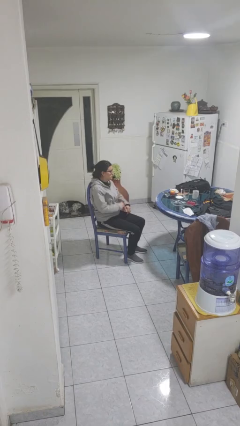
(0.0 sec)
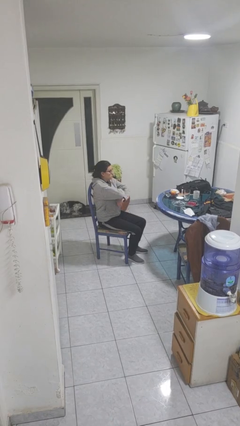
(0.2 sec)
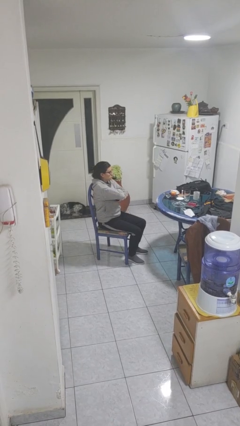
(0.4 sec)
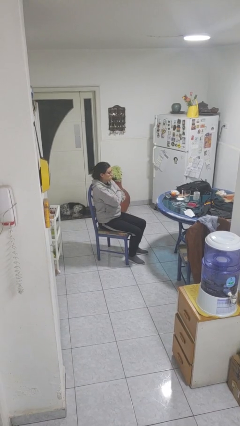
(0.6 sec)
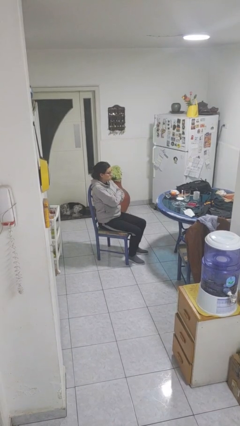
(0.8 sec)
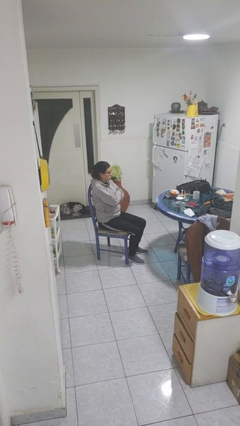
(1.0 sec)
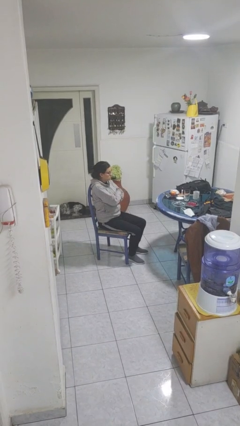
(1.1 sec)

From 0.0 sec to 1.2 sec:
person crosses arms

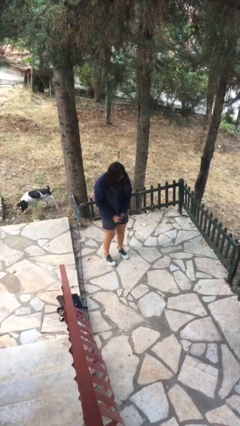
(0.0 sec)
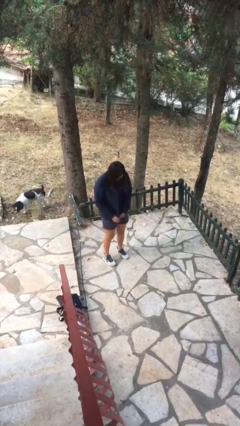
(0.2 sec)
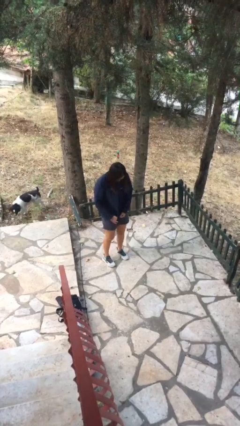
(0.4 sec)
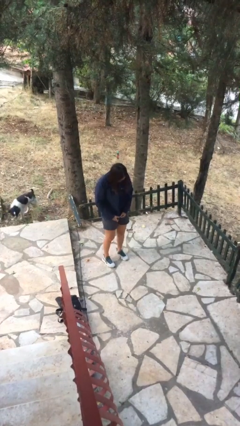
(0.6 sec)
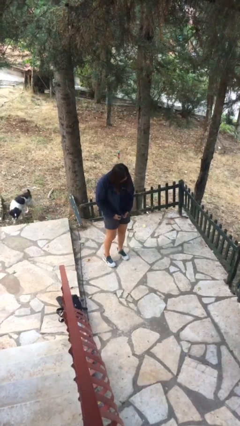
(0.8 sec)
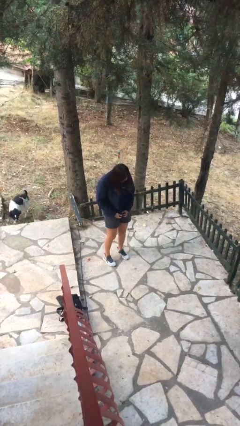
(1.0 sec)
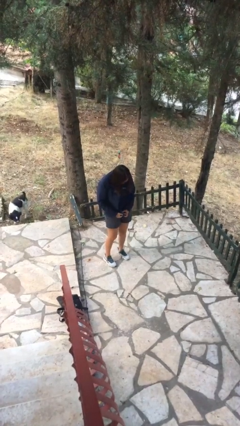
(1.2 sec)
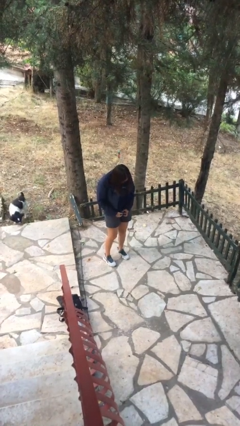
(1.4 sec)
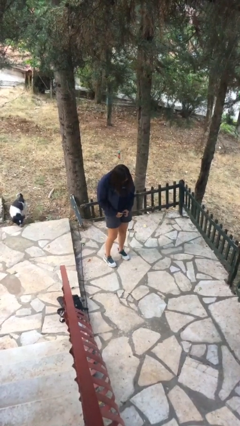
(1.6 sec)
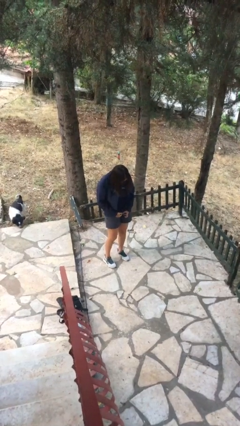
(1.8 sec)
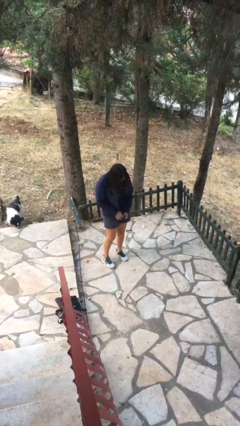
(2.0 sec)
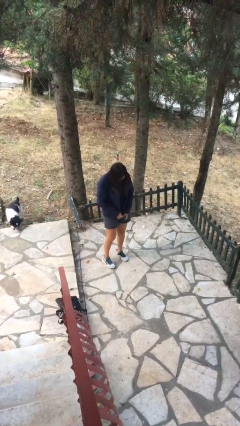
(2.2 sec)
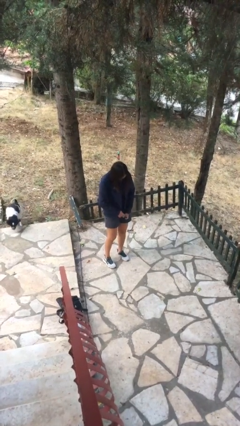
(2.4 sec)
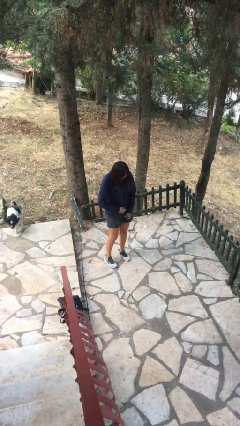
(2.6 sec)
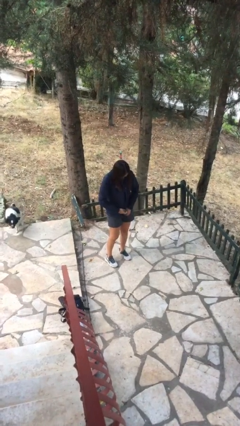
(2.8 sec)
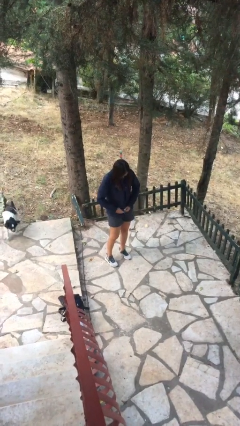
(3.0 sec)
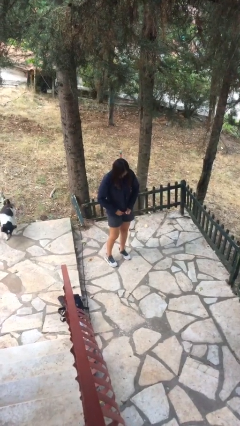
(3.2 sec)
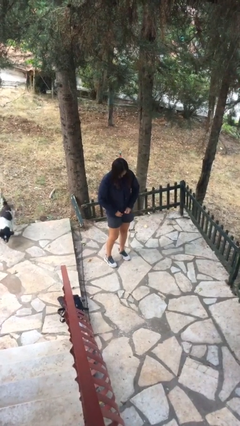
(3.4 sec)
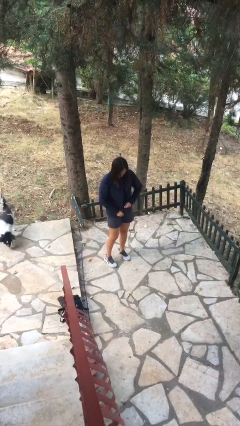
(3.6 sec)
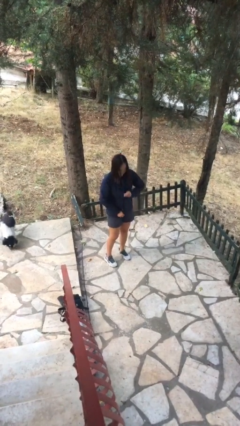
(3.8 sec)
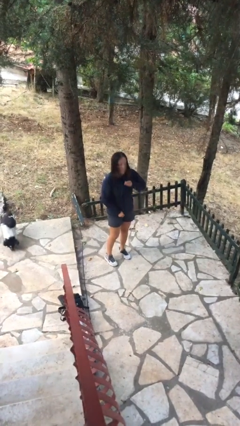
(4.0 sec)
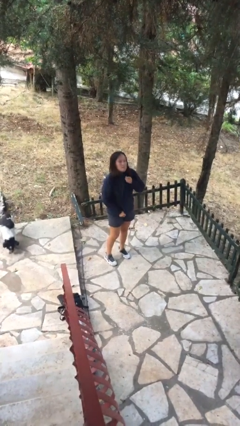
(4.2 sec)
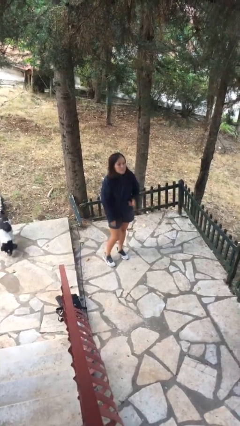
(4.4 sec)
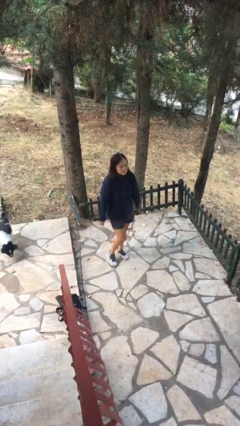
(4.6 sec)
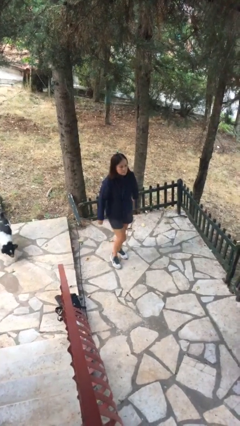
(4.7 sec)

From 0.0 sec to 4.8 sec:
person zips up jacket

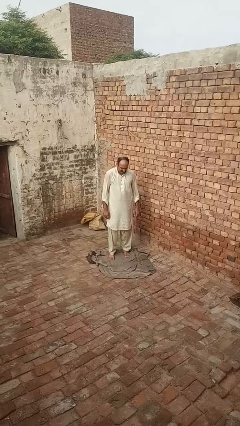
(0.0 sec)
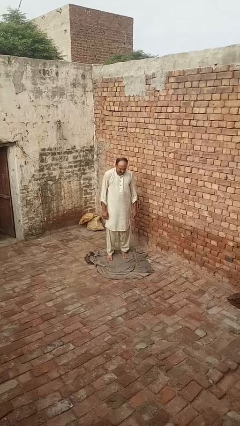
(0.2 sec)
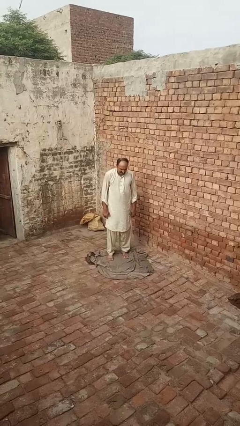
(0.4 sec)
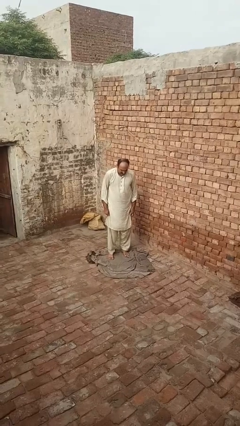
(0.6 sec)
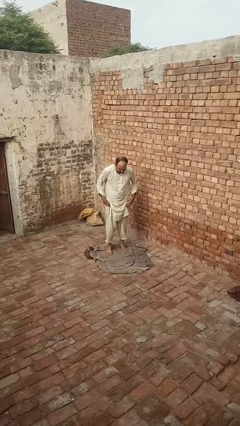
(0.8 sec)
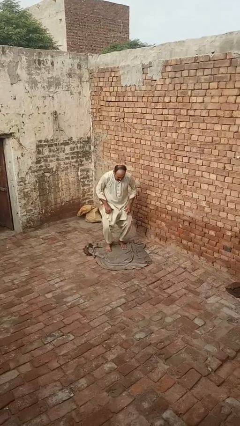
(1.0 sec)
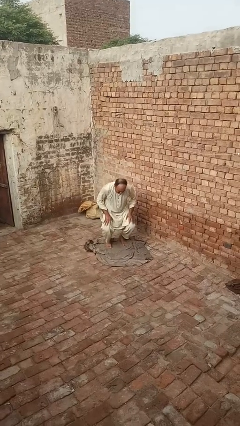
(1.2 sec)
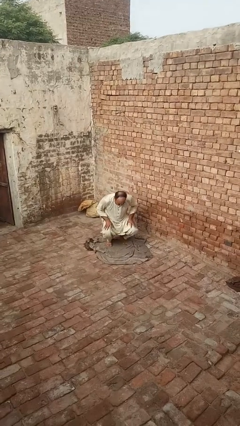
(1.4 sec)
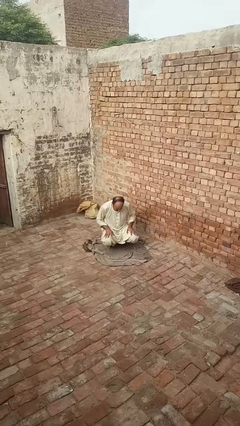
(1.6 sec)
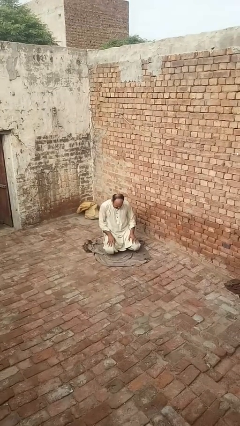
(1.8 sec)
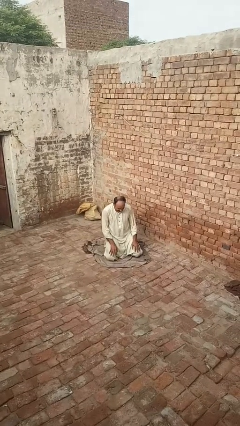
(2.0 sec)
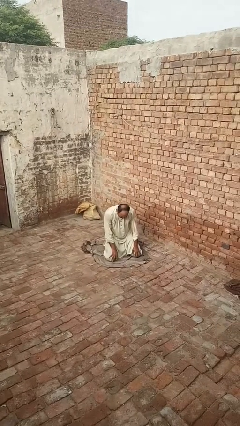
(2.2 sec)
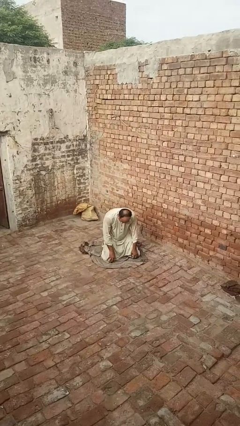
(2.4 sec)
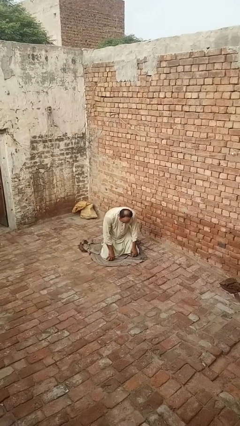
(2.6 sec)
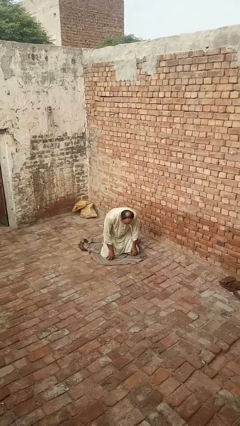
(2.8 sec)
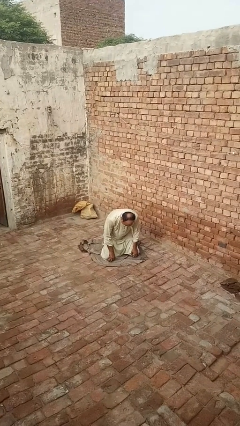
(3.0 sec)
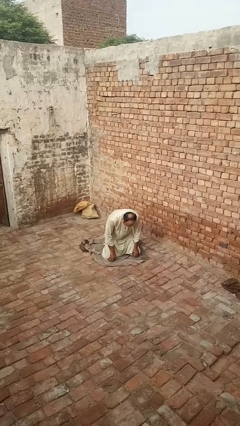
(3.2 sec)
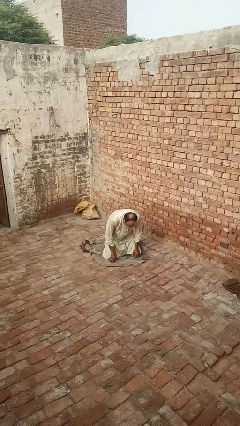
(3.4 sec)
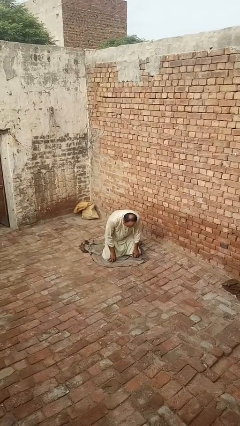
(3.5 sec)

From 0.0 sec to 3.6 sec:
person kneels

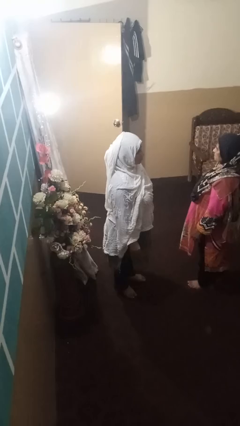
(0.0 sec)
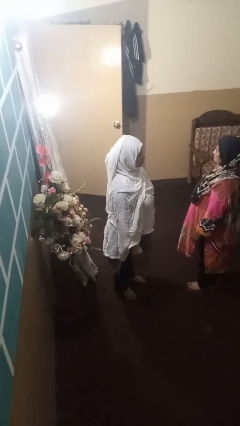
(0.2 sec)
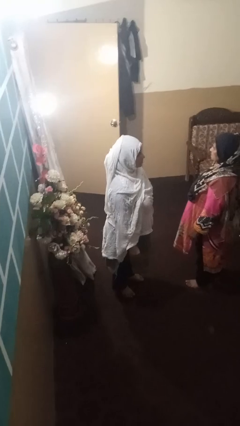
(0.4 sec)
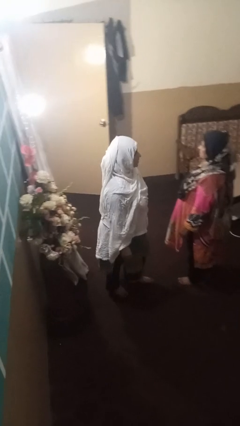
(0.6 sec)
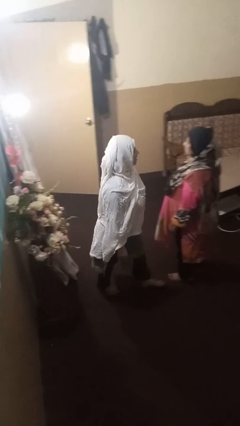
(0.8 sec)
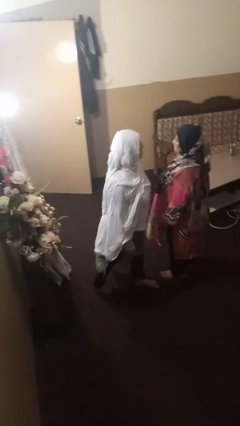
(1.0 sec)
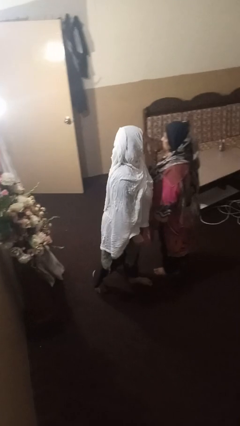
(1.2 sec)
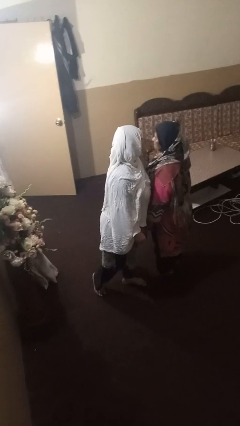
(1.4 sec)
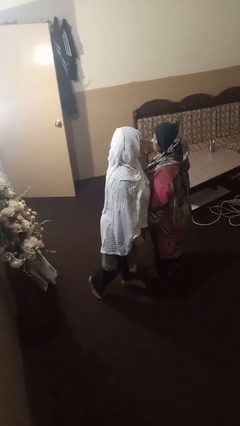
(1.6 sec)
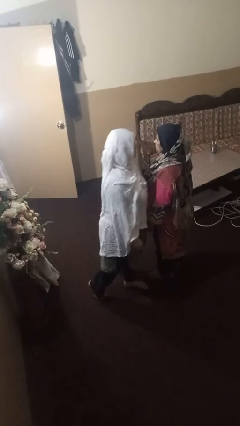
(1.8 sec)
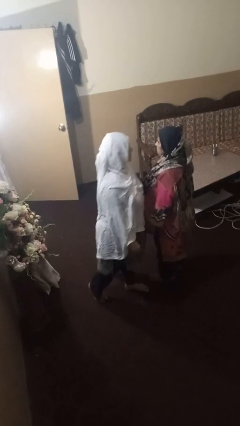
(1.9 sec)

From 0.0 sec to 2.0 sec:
person laughs with person

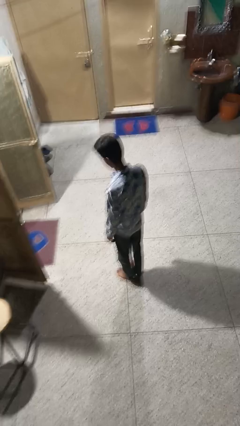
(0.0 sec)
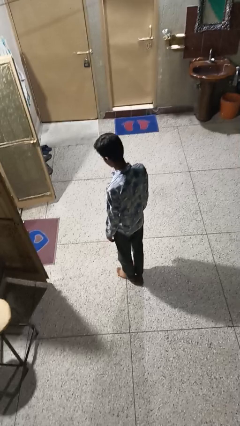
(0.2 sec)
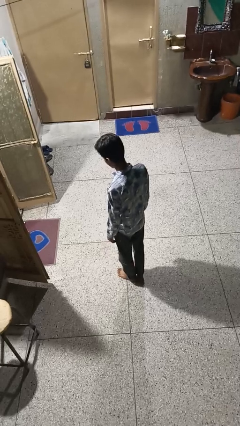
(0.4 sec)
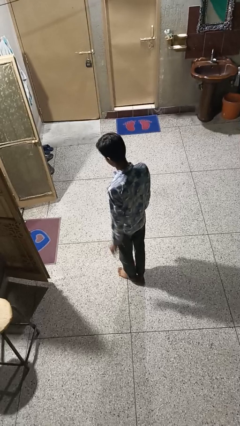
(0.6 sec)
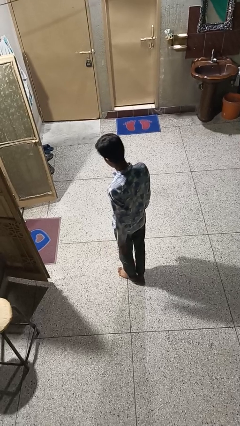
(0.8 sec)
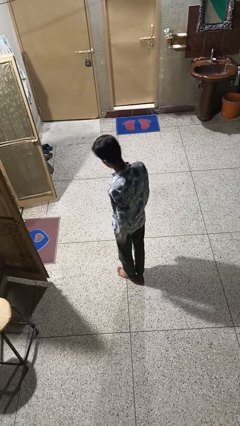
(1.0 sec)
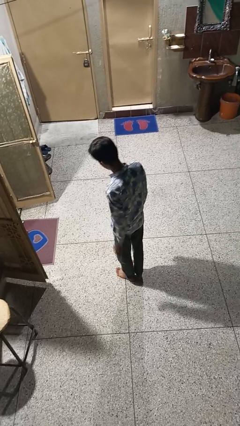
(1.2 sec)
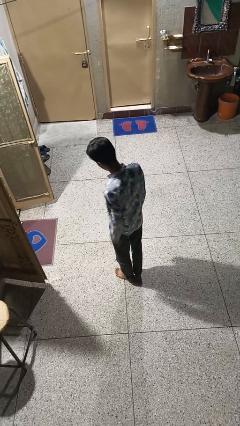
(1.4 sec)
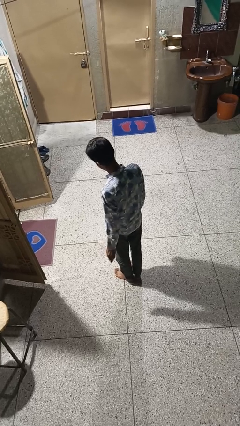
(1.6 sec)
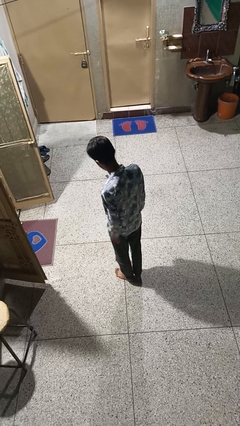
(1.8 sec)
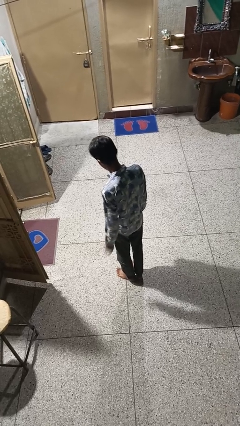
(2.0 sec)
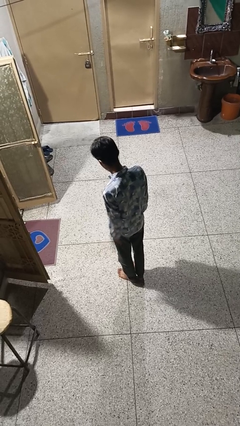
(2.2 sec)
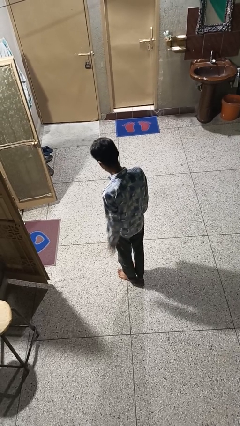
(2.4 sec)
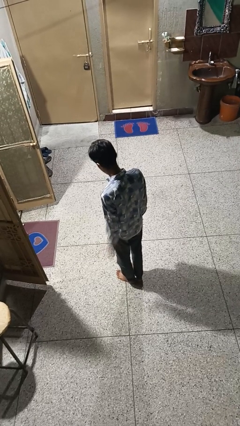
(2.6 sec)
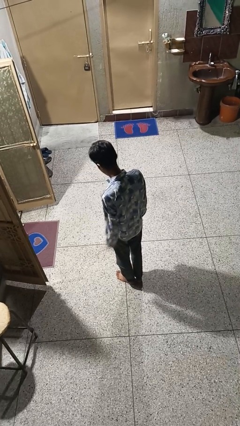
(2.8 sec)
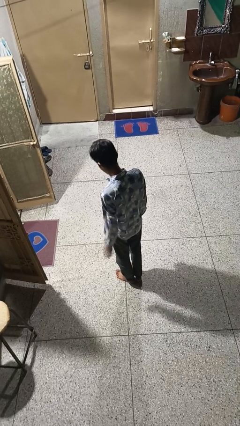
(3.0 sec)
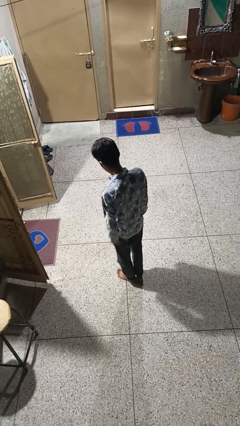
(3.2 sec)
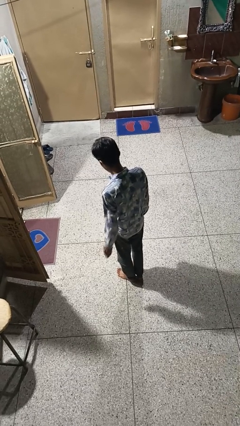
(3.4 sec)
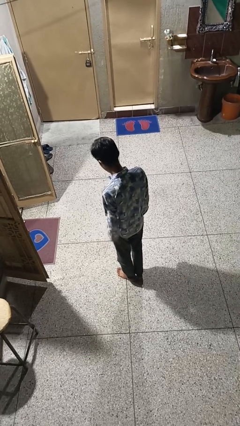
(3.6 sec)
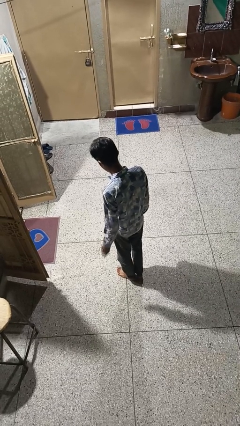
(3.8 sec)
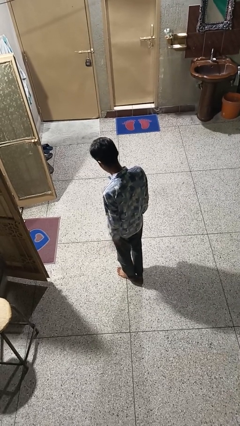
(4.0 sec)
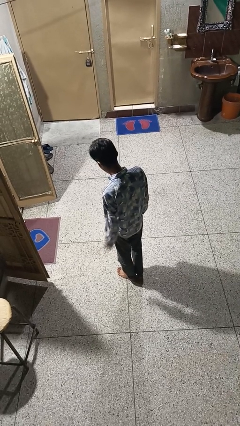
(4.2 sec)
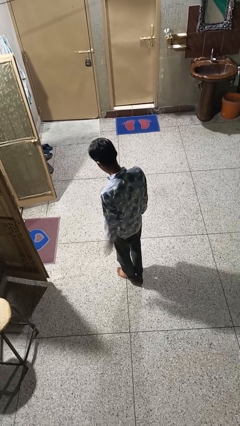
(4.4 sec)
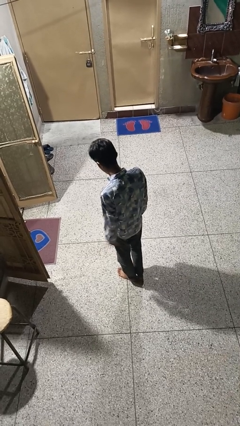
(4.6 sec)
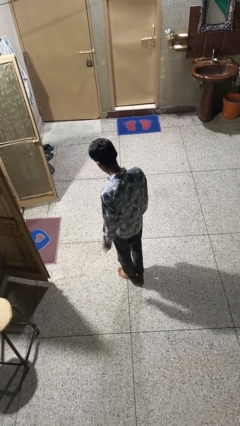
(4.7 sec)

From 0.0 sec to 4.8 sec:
person slaps hands on thighs

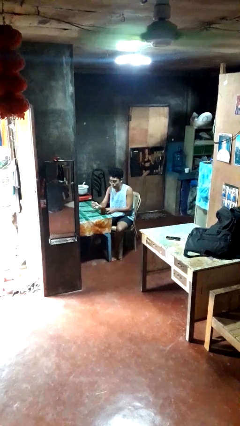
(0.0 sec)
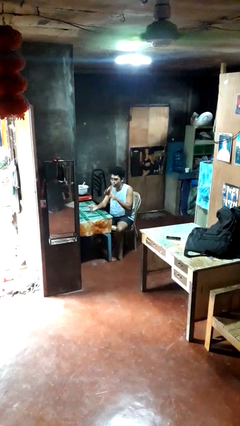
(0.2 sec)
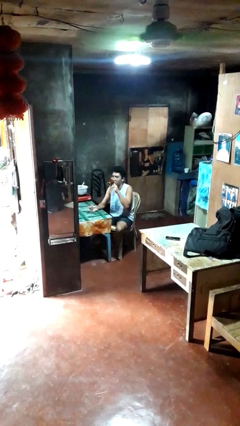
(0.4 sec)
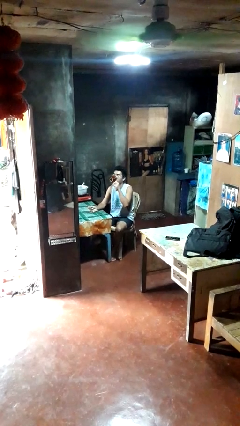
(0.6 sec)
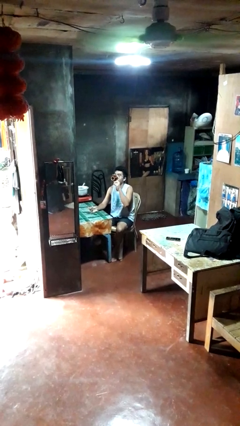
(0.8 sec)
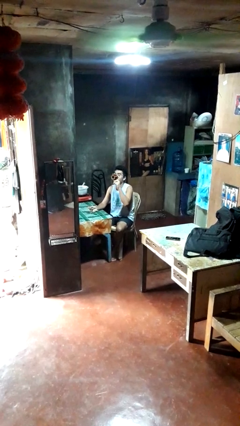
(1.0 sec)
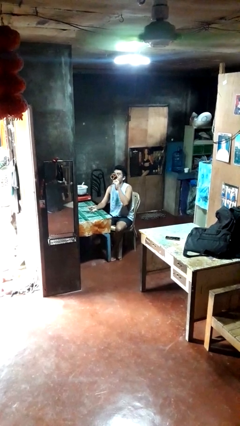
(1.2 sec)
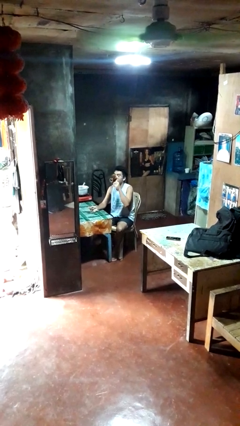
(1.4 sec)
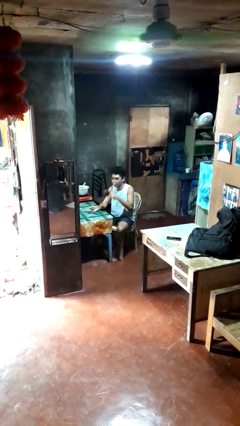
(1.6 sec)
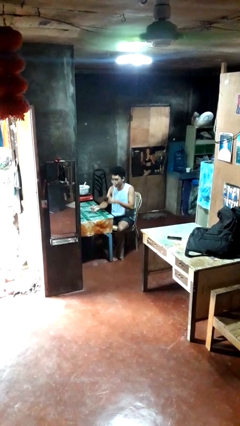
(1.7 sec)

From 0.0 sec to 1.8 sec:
person drinks from mug
